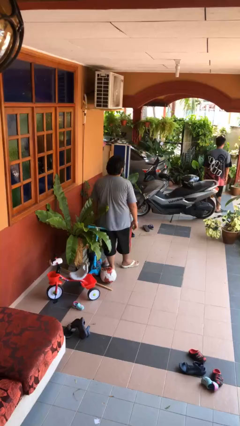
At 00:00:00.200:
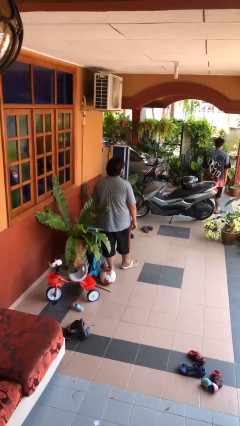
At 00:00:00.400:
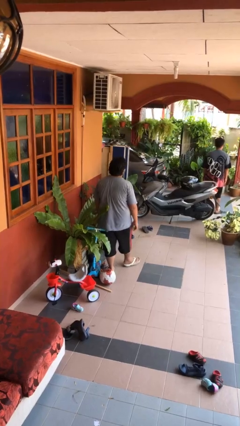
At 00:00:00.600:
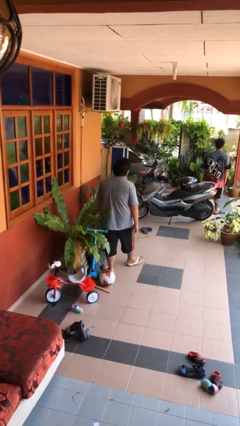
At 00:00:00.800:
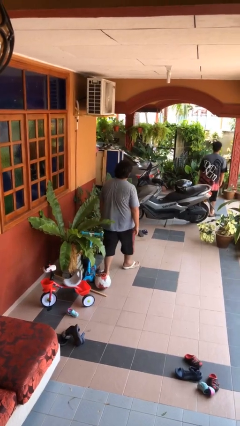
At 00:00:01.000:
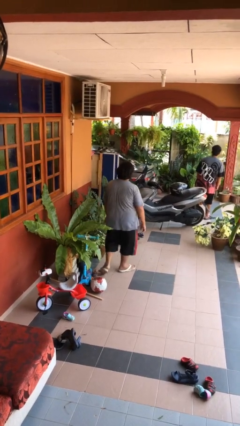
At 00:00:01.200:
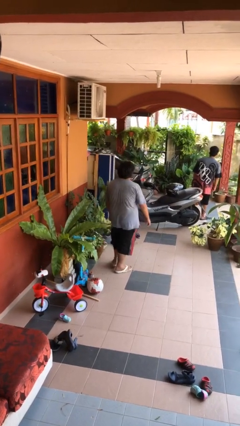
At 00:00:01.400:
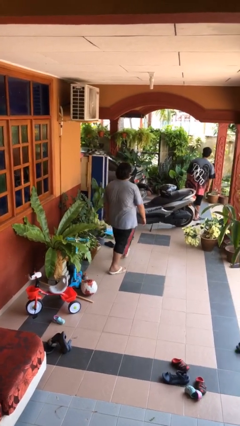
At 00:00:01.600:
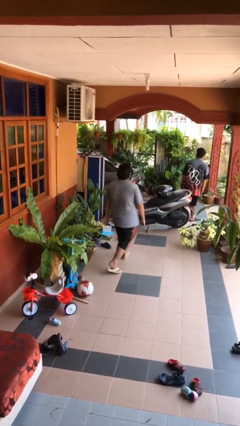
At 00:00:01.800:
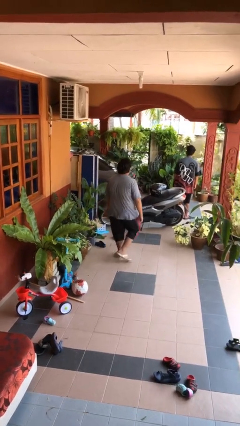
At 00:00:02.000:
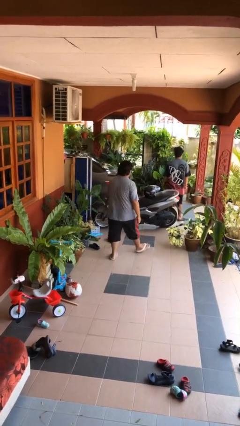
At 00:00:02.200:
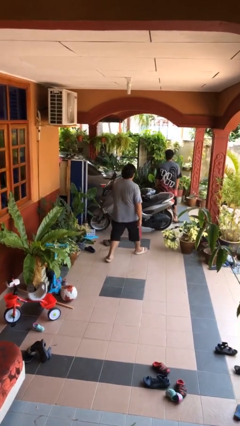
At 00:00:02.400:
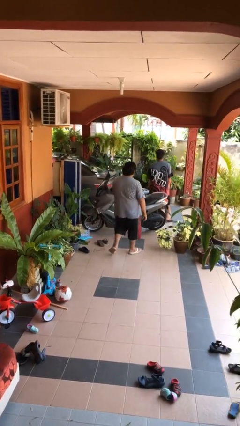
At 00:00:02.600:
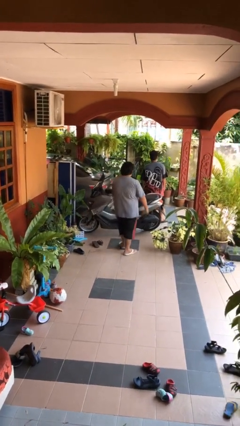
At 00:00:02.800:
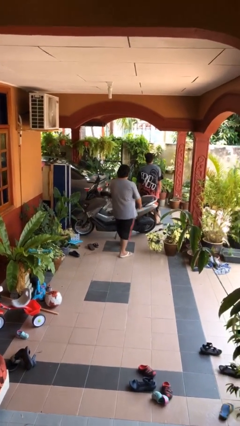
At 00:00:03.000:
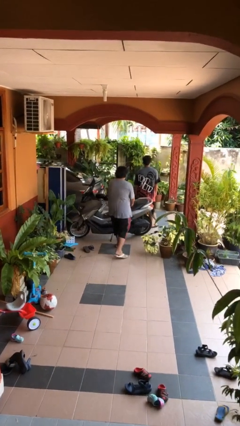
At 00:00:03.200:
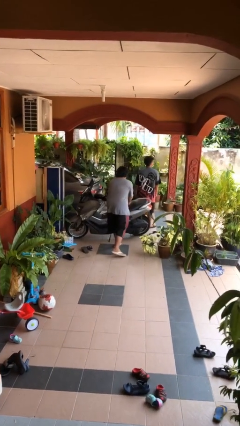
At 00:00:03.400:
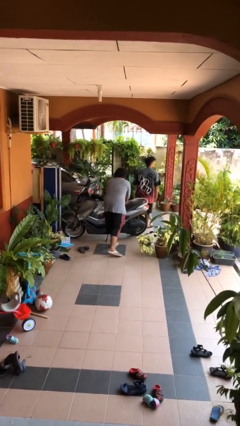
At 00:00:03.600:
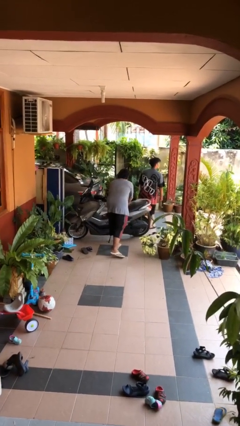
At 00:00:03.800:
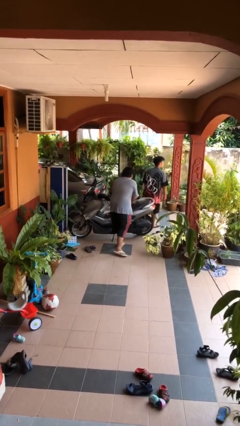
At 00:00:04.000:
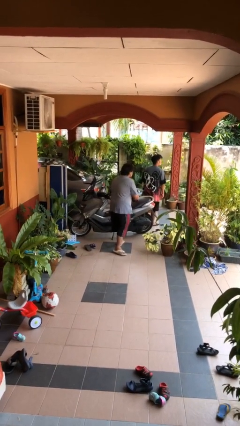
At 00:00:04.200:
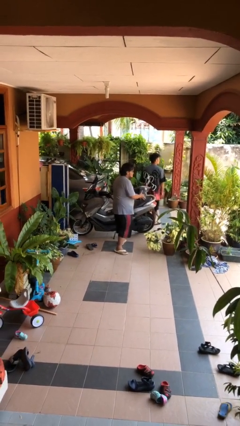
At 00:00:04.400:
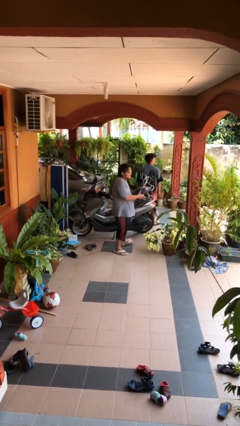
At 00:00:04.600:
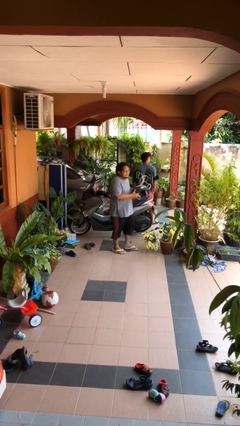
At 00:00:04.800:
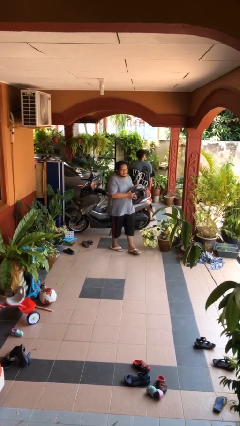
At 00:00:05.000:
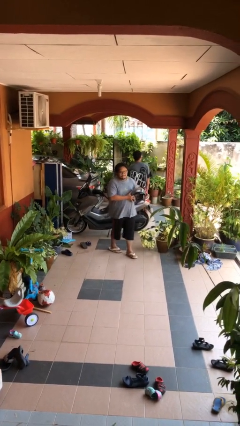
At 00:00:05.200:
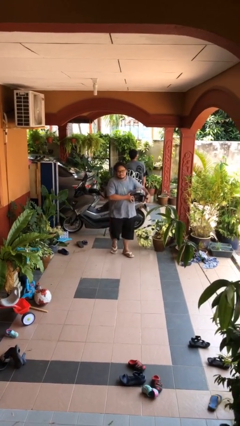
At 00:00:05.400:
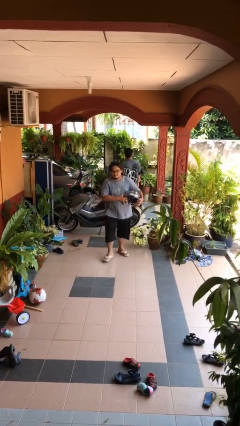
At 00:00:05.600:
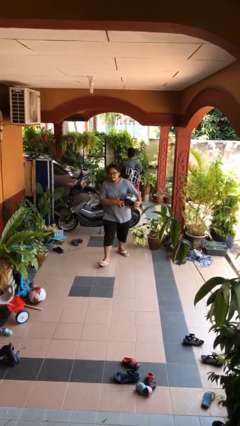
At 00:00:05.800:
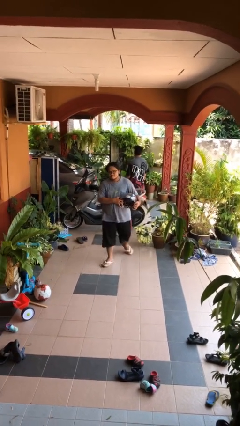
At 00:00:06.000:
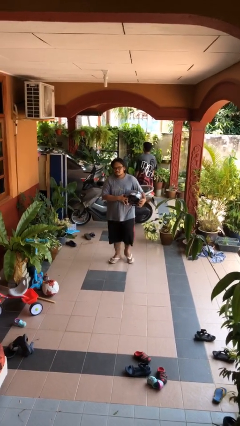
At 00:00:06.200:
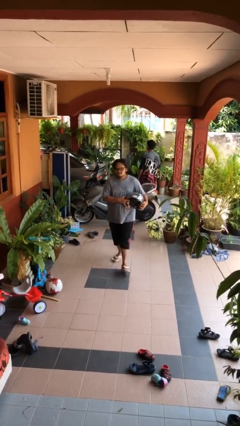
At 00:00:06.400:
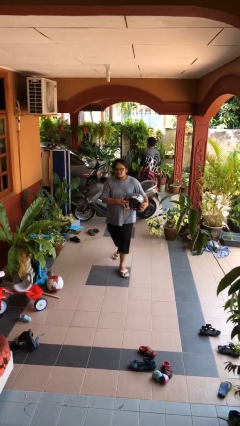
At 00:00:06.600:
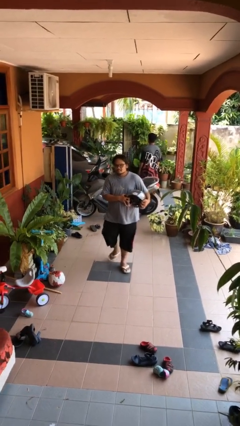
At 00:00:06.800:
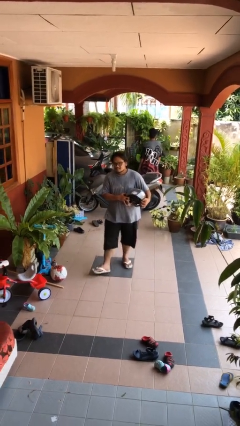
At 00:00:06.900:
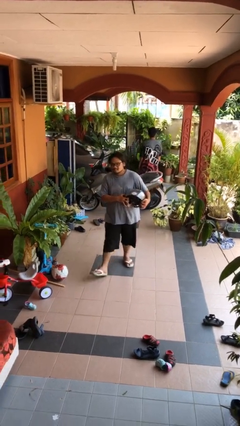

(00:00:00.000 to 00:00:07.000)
person steals object from person

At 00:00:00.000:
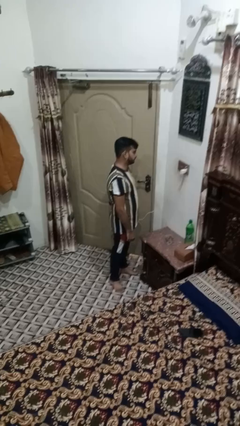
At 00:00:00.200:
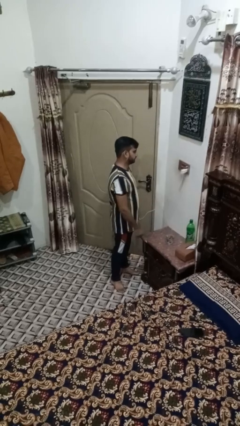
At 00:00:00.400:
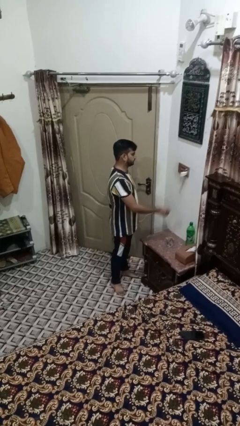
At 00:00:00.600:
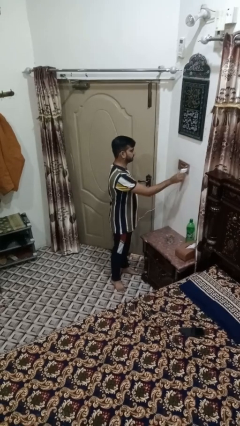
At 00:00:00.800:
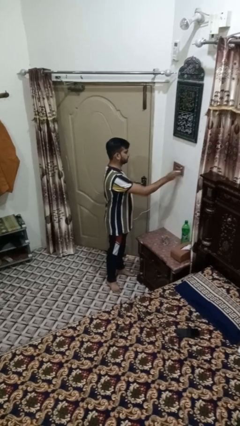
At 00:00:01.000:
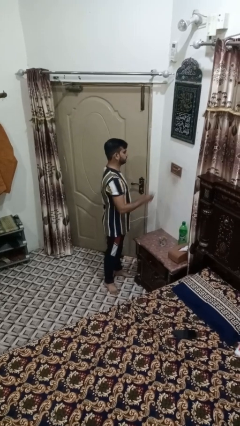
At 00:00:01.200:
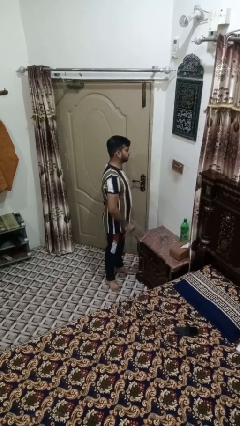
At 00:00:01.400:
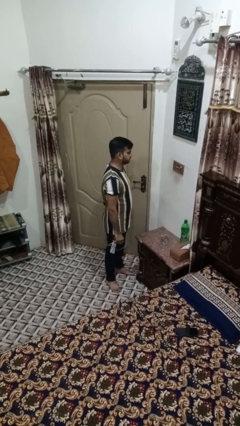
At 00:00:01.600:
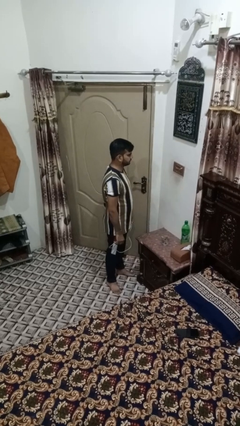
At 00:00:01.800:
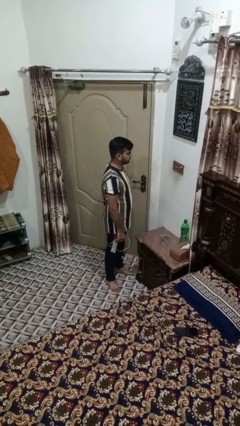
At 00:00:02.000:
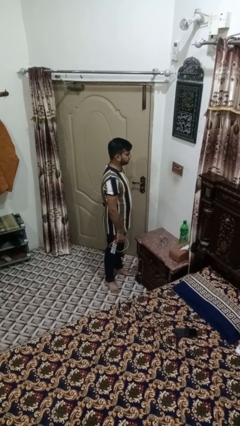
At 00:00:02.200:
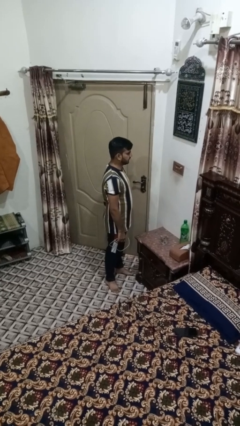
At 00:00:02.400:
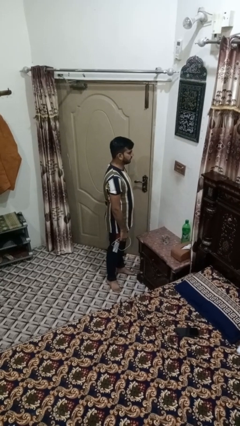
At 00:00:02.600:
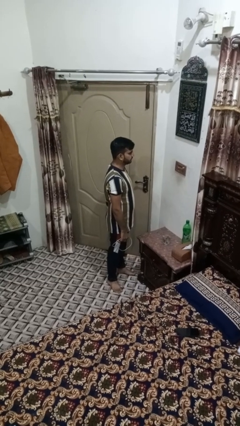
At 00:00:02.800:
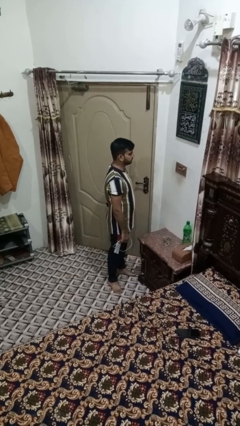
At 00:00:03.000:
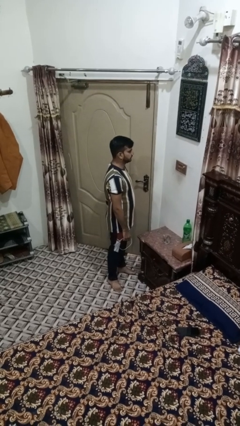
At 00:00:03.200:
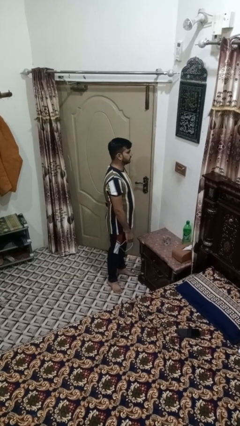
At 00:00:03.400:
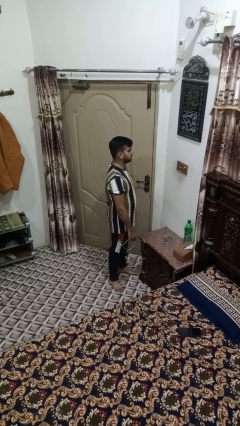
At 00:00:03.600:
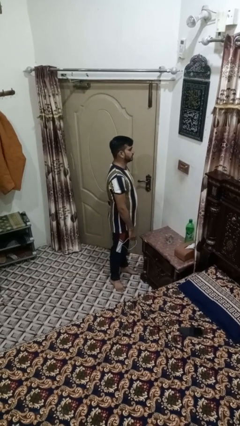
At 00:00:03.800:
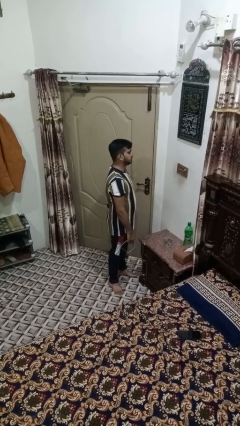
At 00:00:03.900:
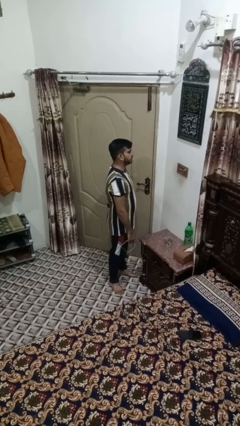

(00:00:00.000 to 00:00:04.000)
person unplugs from electrical socket

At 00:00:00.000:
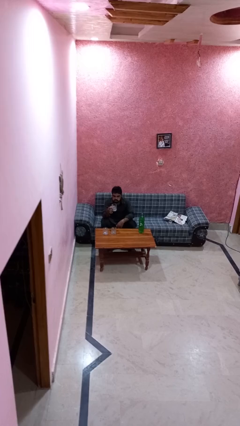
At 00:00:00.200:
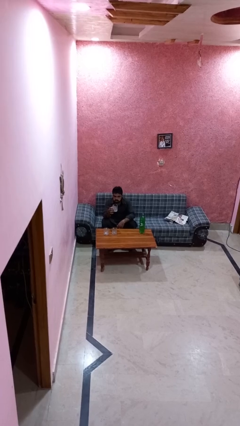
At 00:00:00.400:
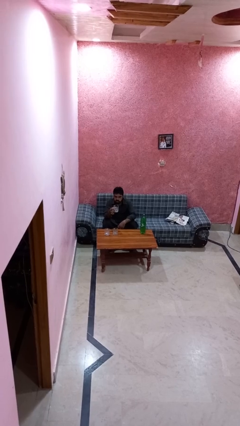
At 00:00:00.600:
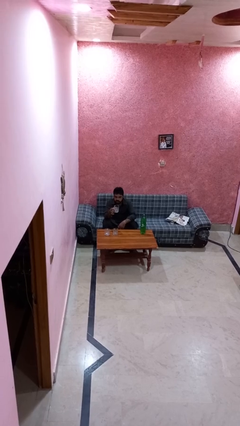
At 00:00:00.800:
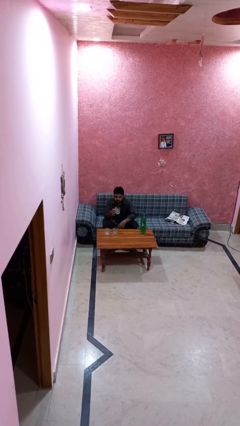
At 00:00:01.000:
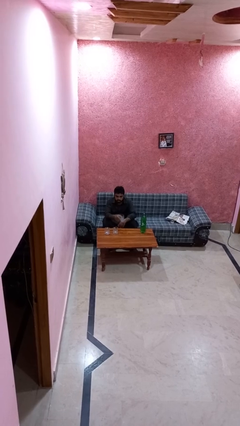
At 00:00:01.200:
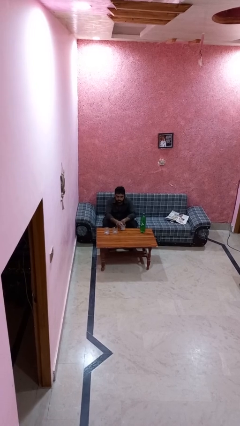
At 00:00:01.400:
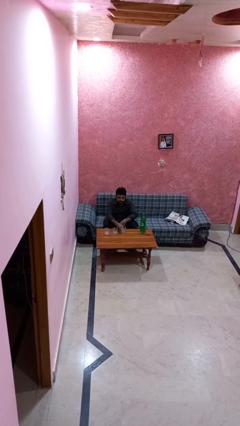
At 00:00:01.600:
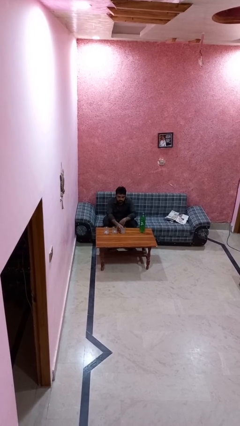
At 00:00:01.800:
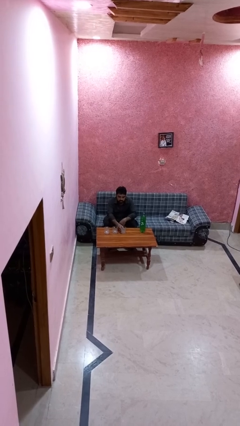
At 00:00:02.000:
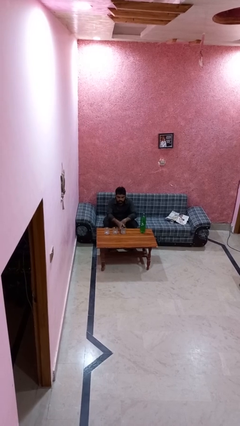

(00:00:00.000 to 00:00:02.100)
person puts down object on table

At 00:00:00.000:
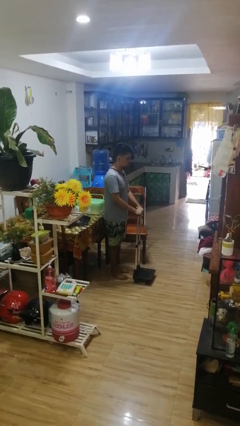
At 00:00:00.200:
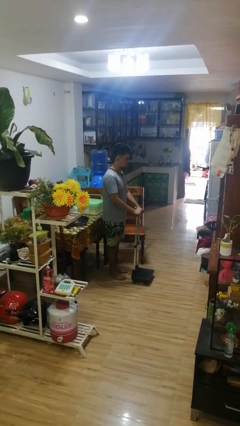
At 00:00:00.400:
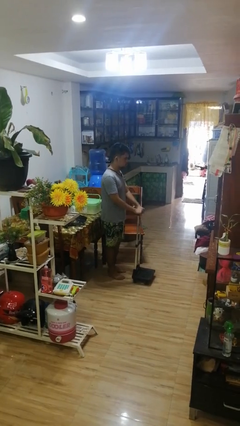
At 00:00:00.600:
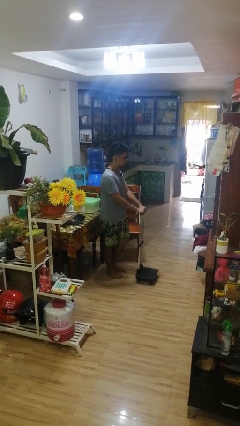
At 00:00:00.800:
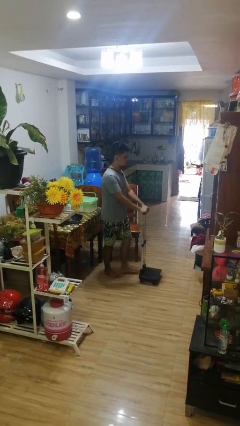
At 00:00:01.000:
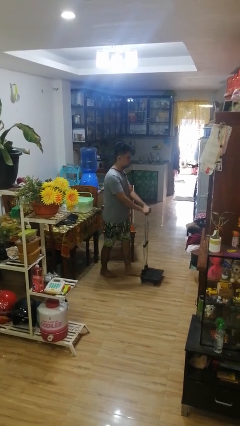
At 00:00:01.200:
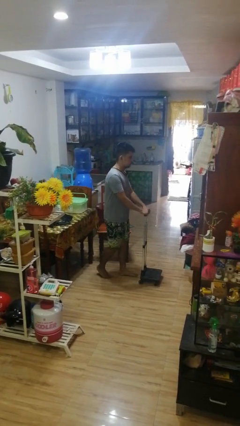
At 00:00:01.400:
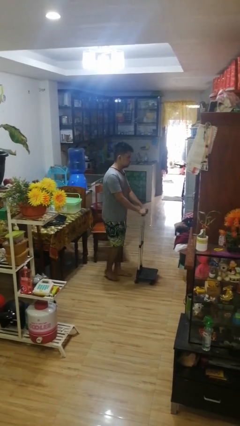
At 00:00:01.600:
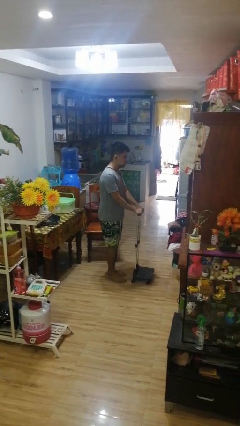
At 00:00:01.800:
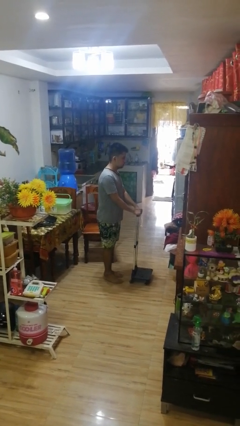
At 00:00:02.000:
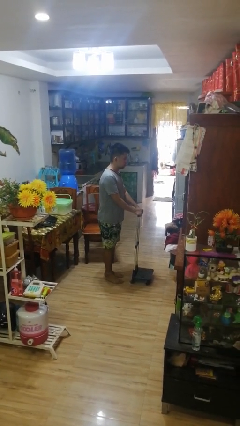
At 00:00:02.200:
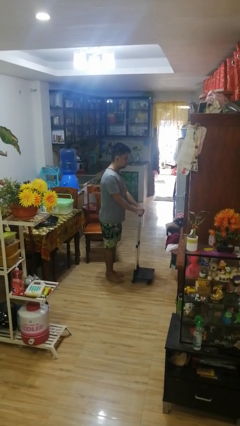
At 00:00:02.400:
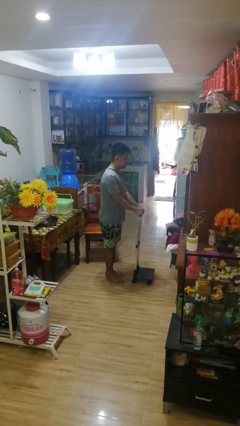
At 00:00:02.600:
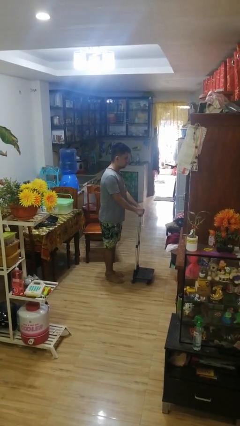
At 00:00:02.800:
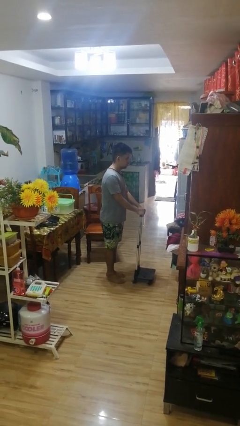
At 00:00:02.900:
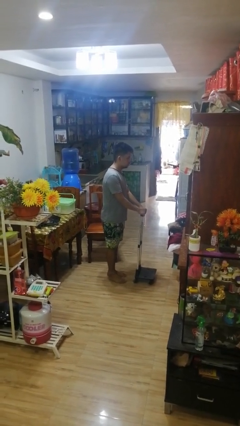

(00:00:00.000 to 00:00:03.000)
person pushes wheeled cart

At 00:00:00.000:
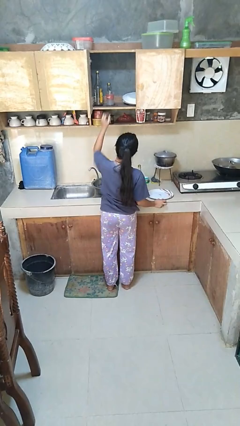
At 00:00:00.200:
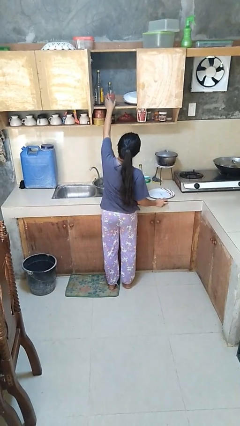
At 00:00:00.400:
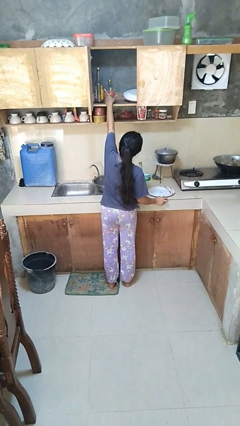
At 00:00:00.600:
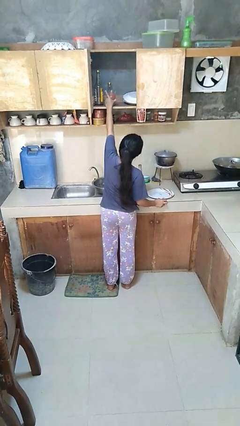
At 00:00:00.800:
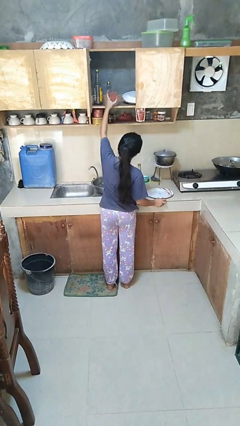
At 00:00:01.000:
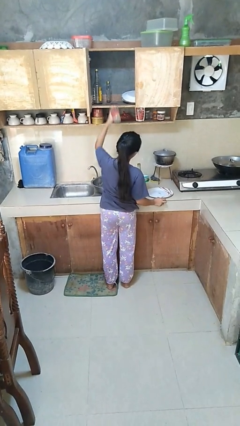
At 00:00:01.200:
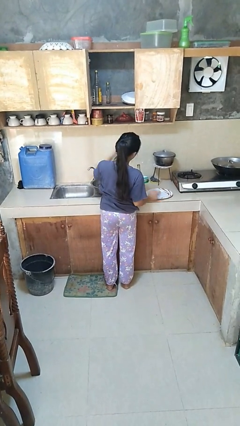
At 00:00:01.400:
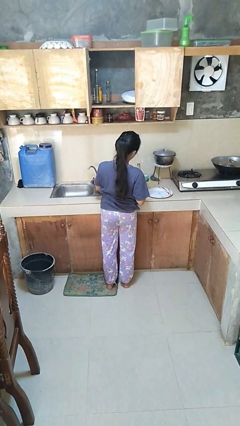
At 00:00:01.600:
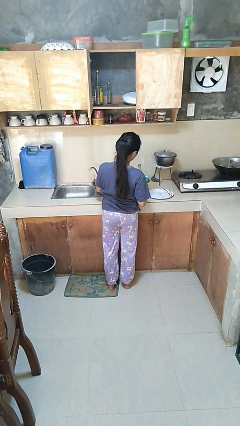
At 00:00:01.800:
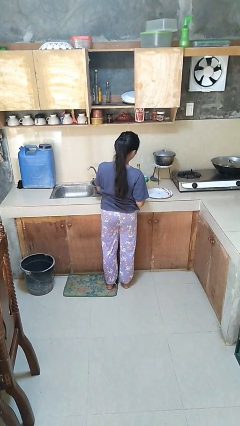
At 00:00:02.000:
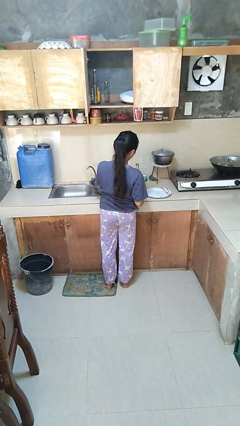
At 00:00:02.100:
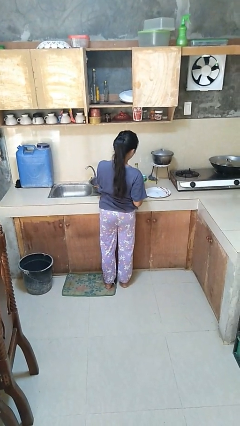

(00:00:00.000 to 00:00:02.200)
person takes object from cabinet
